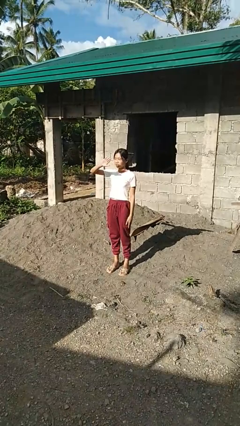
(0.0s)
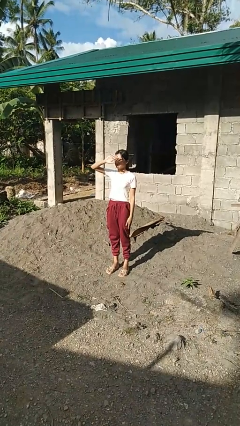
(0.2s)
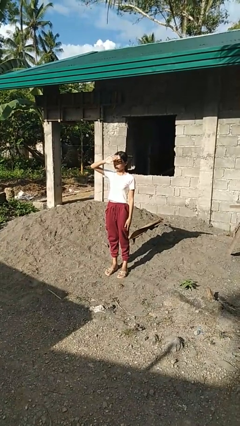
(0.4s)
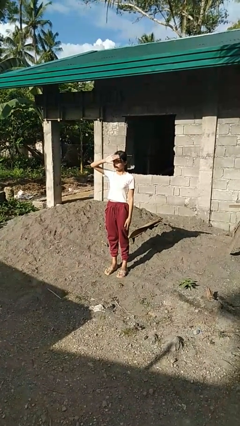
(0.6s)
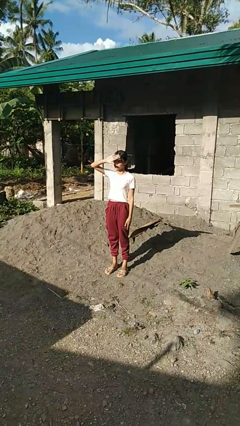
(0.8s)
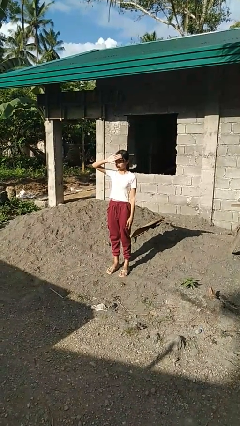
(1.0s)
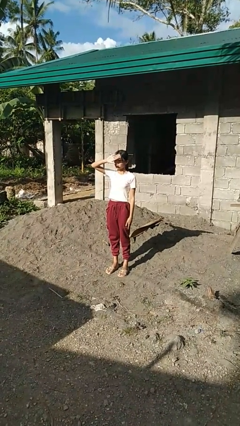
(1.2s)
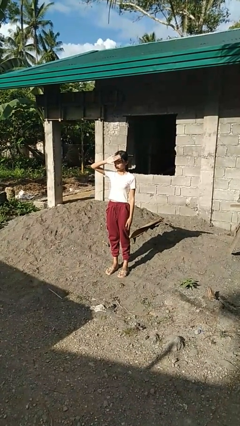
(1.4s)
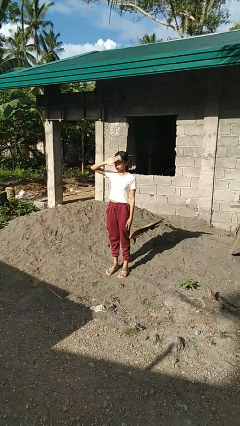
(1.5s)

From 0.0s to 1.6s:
person shades eyes

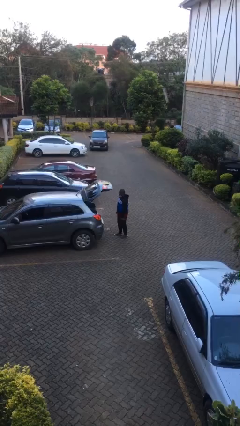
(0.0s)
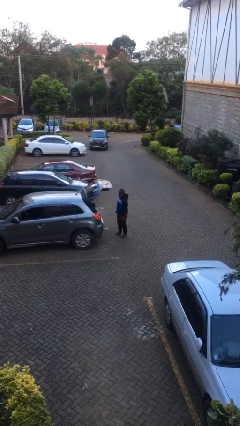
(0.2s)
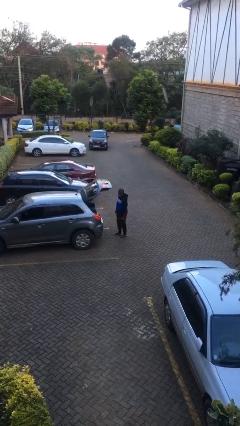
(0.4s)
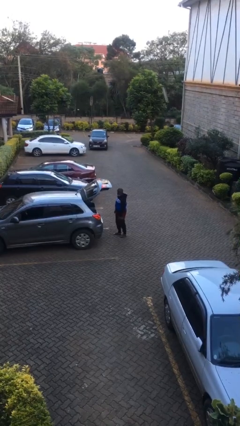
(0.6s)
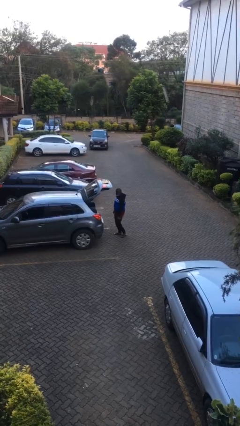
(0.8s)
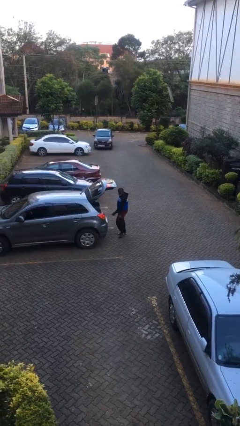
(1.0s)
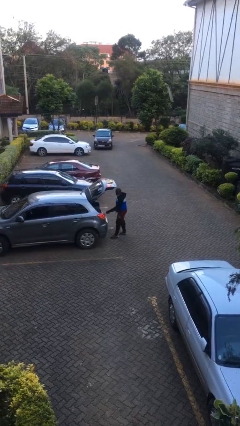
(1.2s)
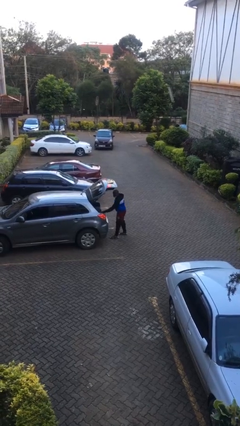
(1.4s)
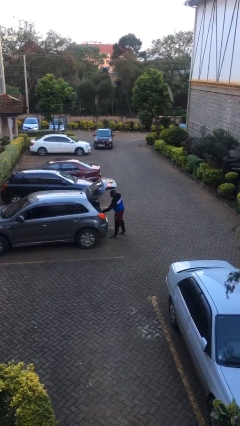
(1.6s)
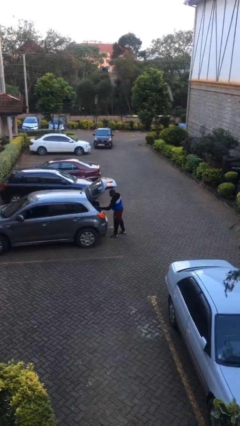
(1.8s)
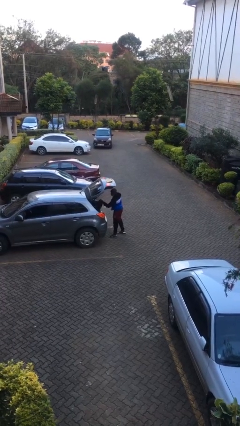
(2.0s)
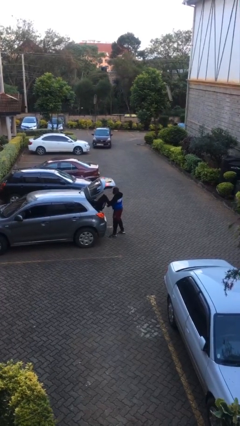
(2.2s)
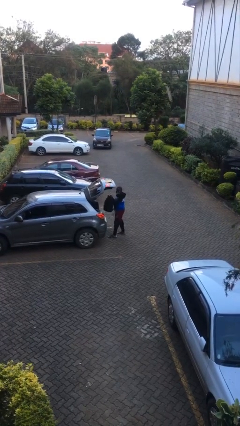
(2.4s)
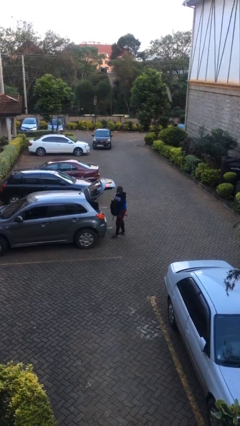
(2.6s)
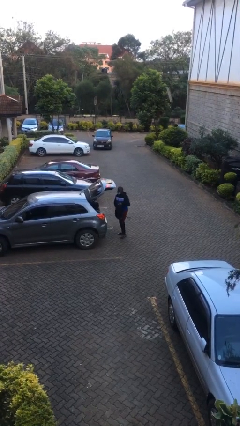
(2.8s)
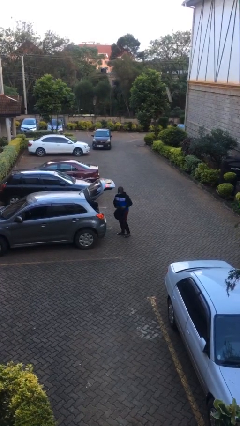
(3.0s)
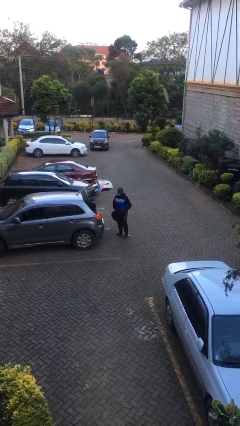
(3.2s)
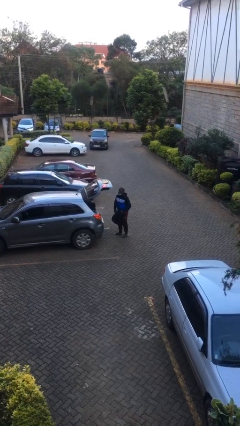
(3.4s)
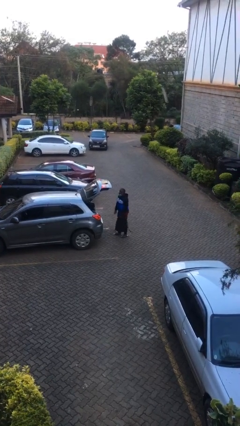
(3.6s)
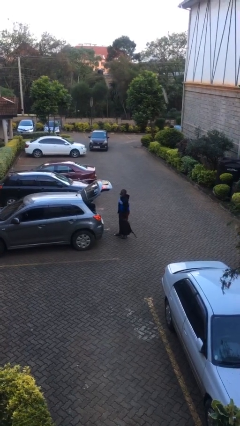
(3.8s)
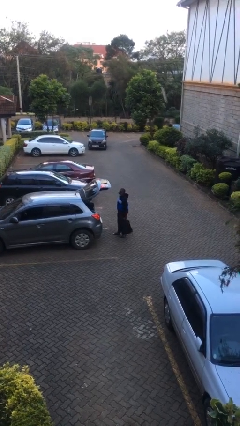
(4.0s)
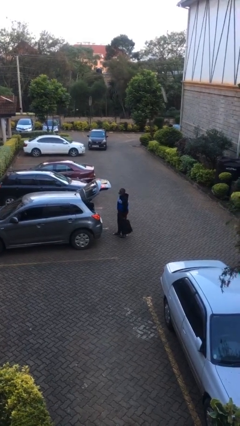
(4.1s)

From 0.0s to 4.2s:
person unloads car

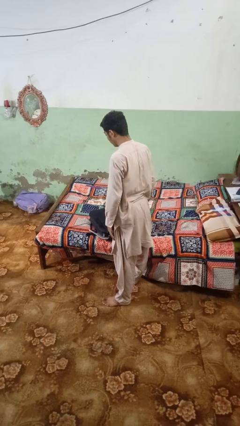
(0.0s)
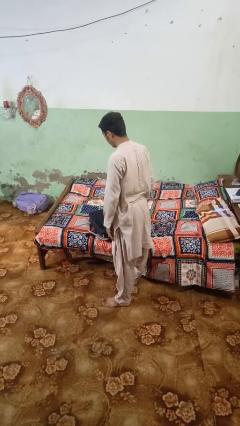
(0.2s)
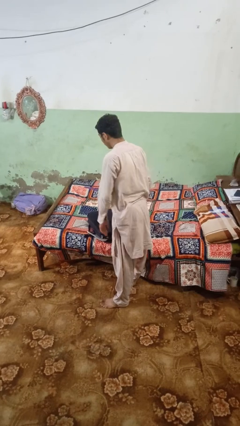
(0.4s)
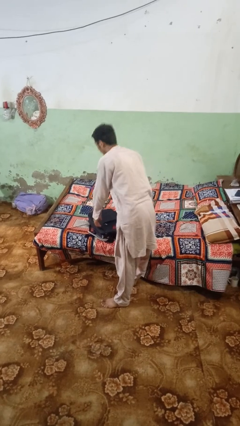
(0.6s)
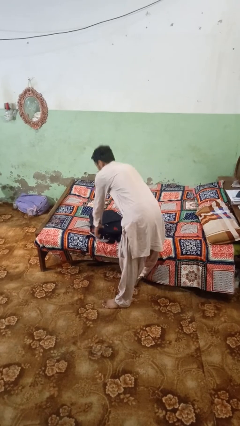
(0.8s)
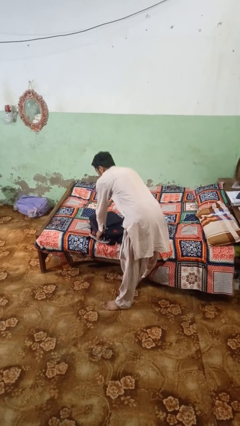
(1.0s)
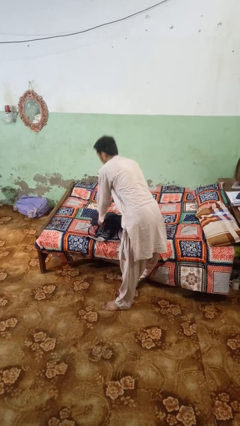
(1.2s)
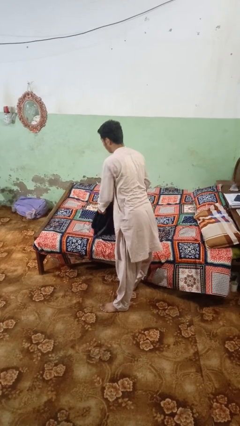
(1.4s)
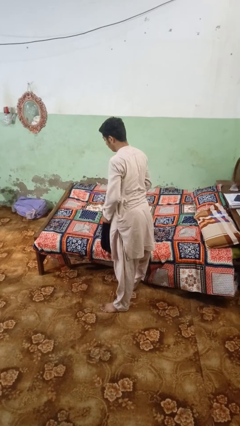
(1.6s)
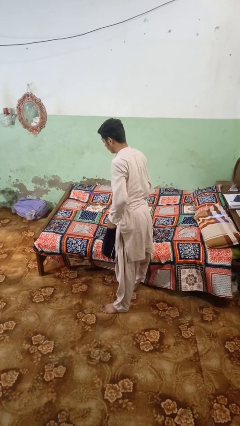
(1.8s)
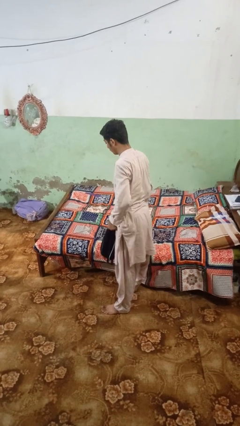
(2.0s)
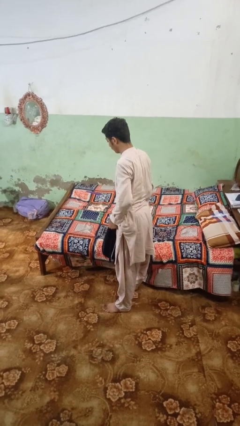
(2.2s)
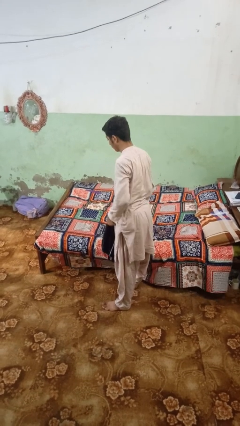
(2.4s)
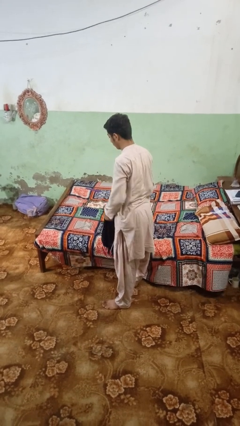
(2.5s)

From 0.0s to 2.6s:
person picks up object from bed

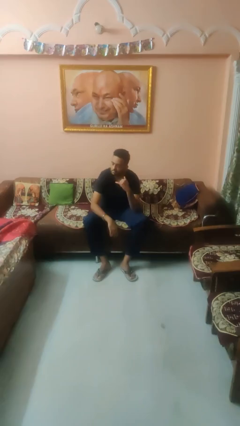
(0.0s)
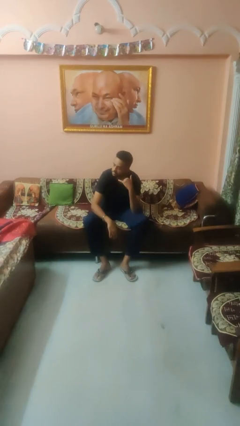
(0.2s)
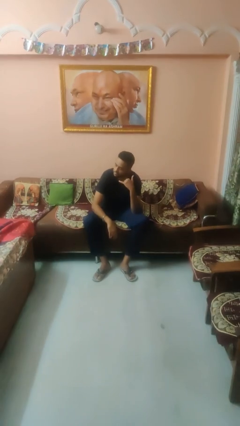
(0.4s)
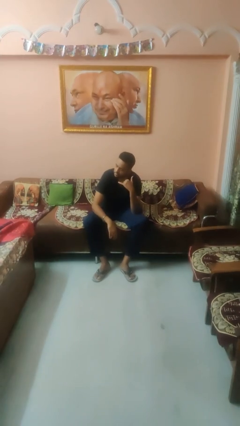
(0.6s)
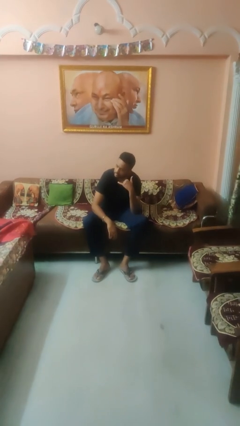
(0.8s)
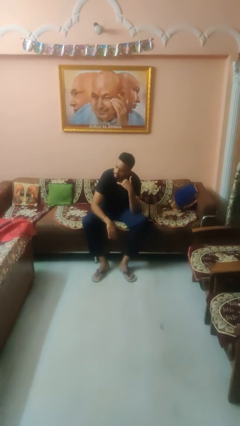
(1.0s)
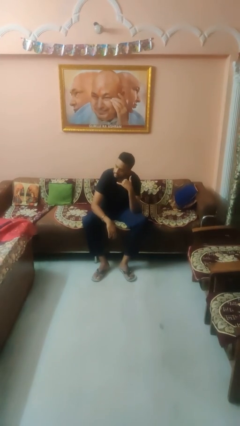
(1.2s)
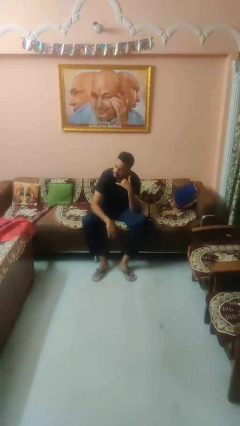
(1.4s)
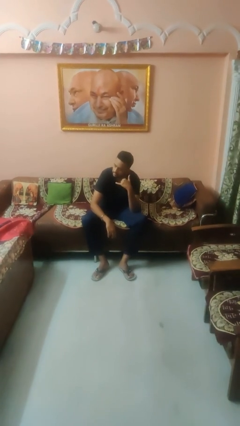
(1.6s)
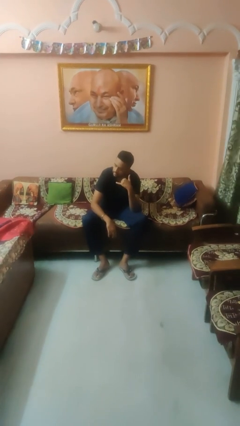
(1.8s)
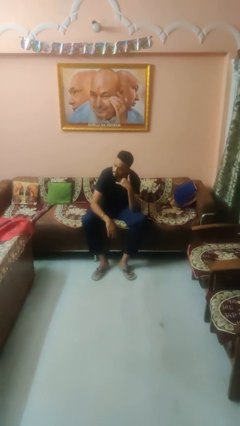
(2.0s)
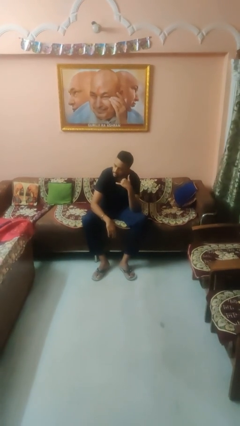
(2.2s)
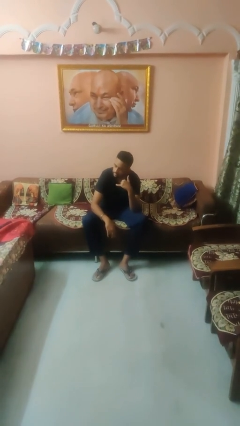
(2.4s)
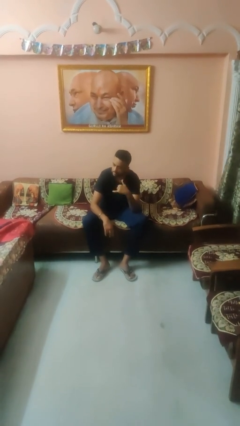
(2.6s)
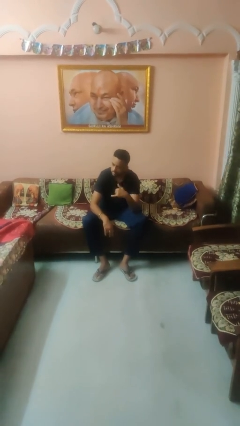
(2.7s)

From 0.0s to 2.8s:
person gestures call me

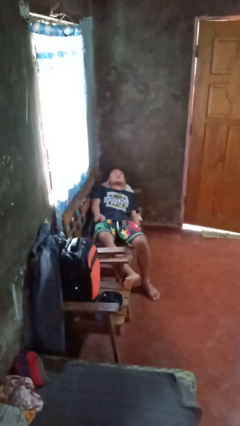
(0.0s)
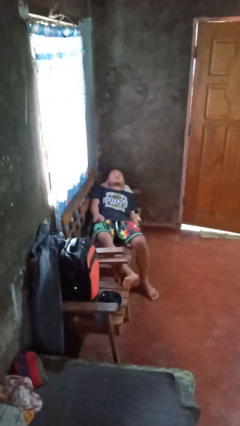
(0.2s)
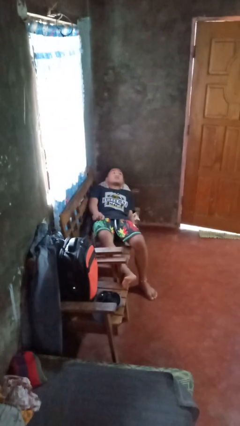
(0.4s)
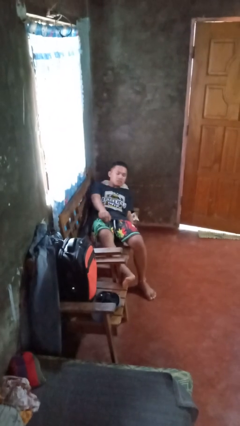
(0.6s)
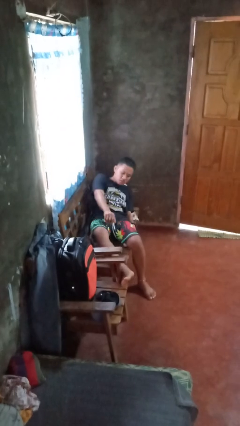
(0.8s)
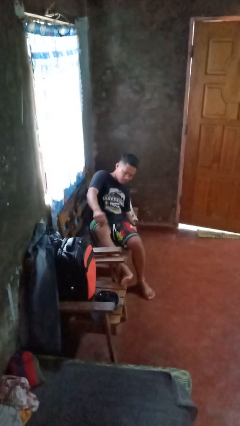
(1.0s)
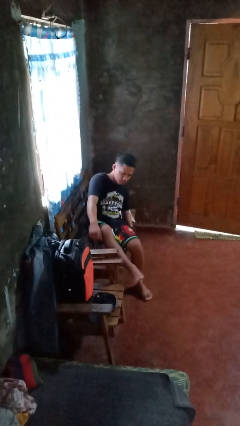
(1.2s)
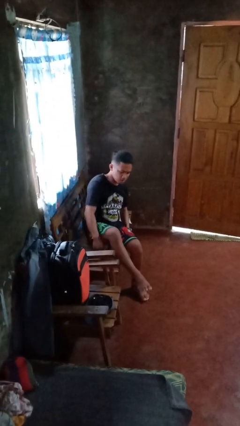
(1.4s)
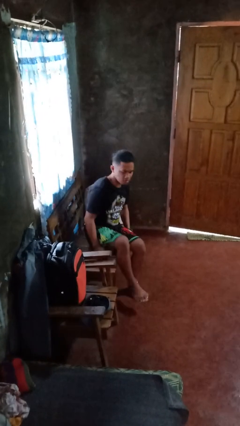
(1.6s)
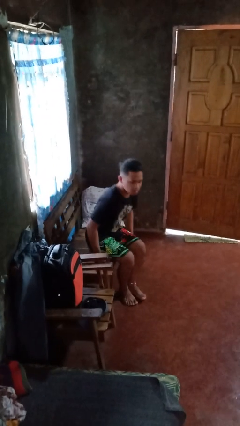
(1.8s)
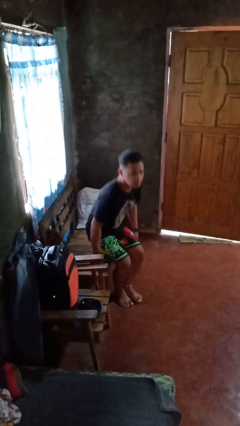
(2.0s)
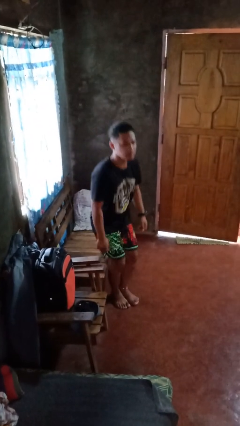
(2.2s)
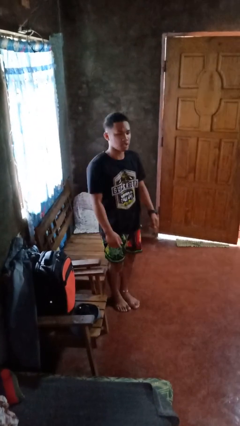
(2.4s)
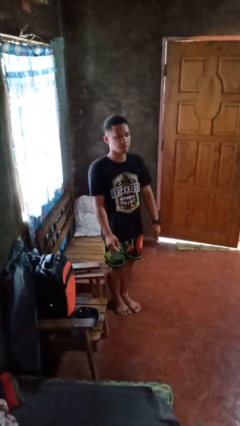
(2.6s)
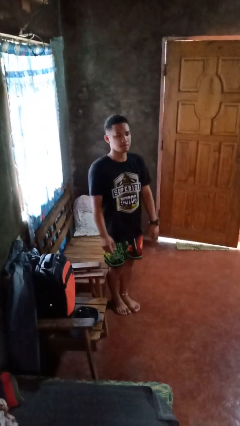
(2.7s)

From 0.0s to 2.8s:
person stands up

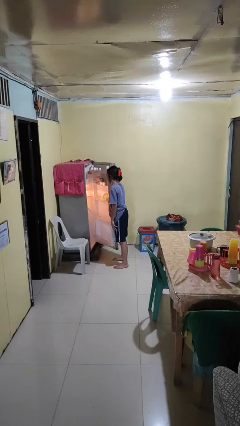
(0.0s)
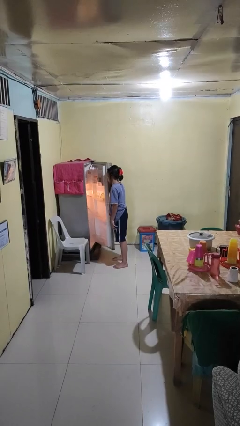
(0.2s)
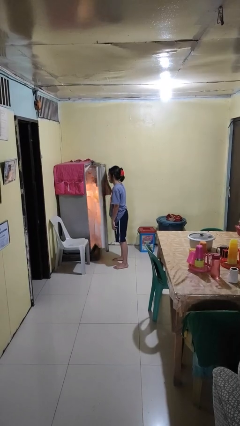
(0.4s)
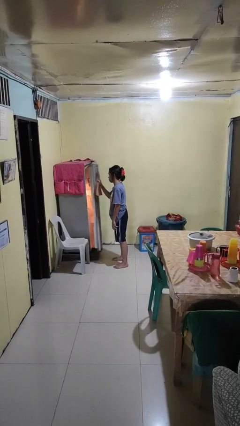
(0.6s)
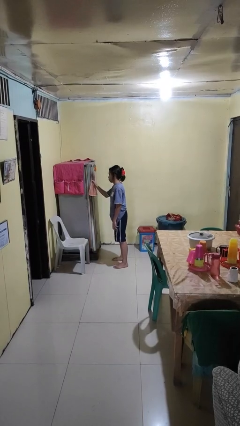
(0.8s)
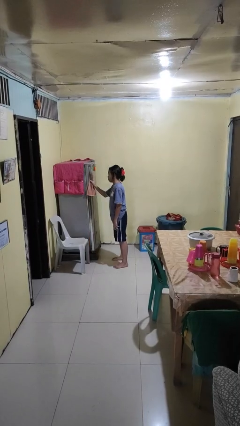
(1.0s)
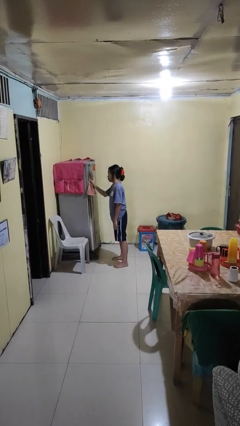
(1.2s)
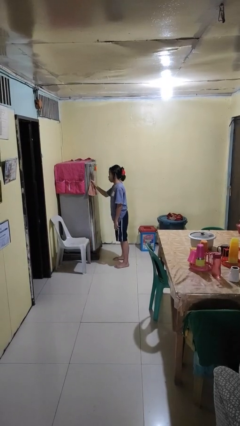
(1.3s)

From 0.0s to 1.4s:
person closes refrigerator

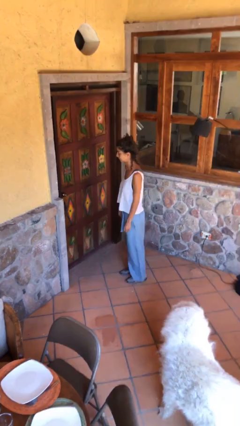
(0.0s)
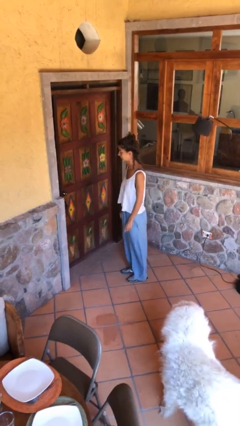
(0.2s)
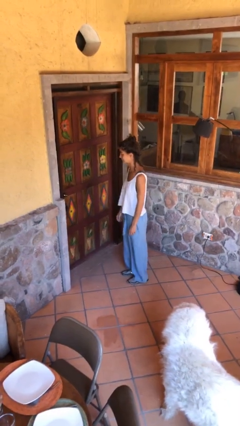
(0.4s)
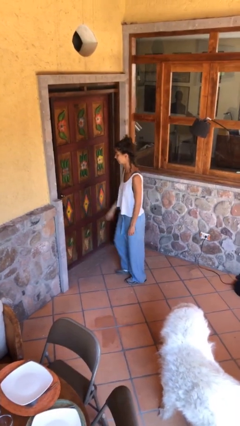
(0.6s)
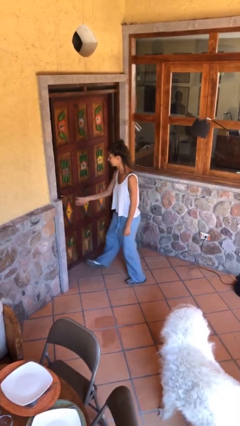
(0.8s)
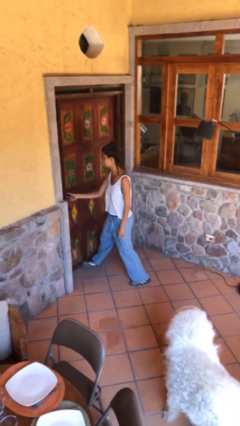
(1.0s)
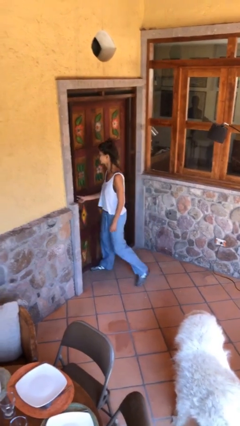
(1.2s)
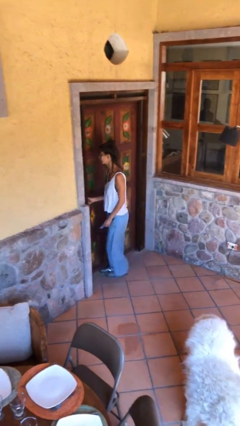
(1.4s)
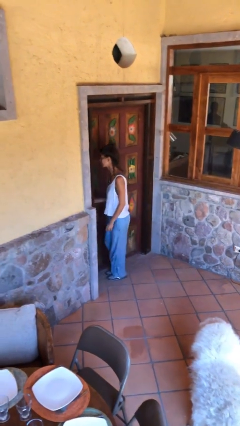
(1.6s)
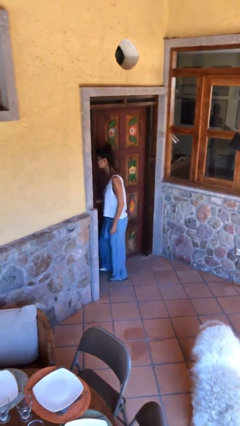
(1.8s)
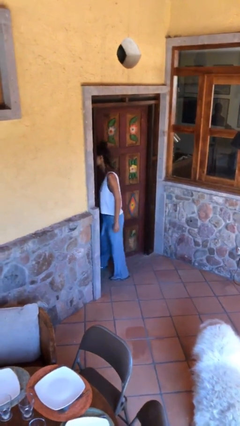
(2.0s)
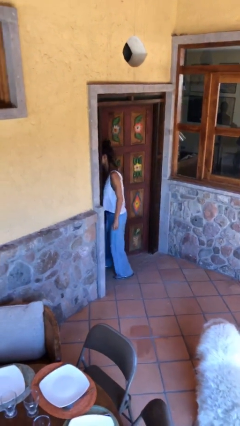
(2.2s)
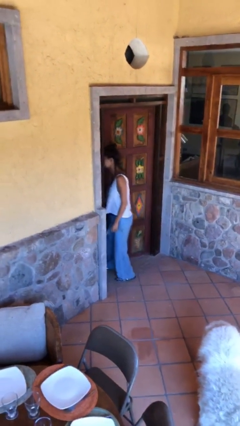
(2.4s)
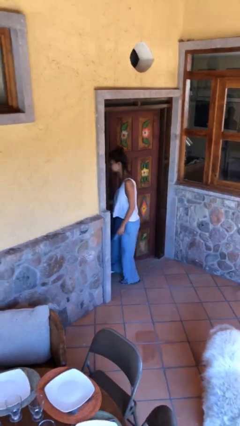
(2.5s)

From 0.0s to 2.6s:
person opens facility door
